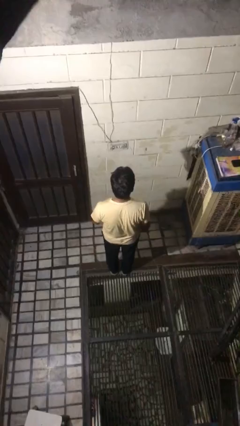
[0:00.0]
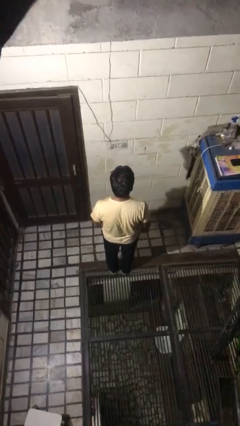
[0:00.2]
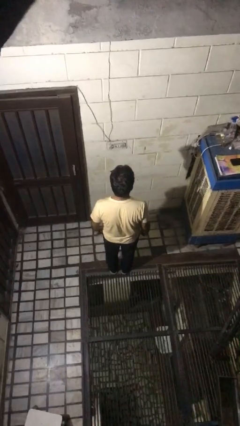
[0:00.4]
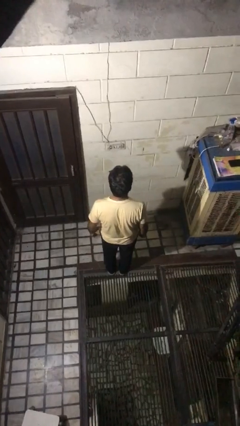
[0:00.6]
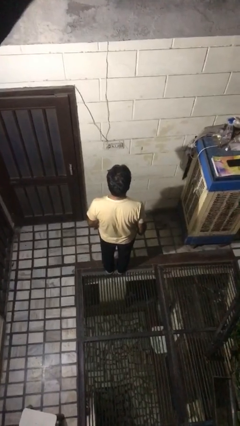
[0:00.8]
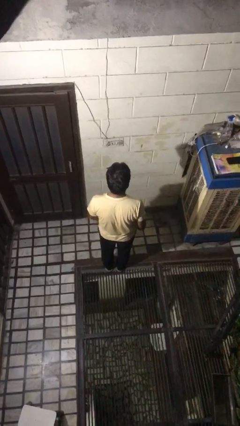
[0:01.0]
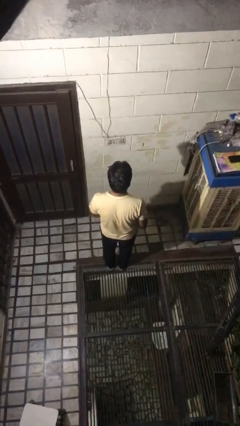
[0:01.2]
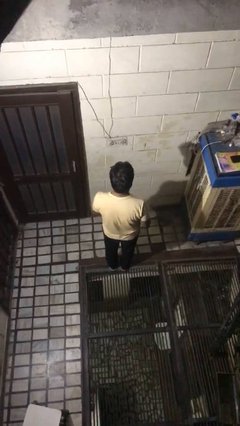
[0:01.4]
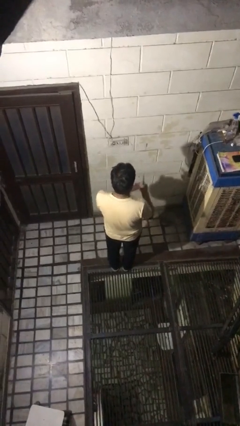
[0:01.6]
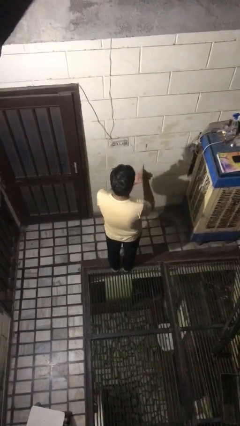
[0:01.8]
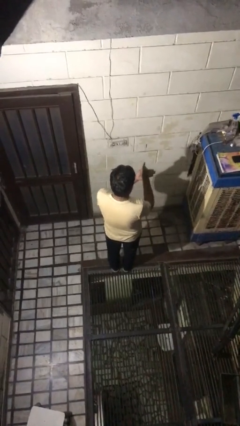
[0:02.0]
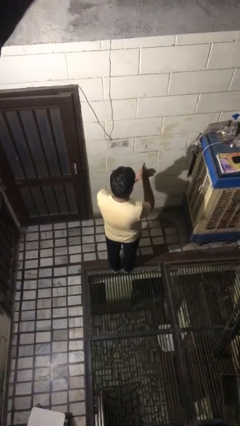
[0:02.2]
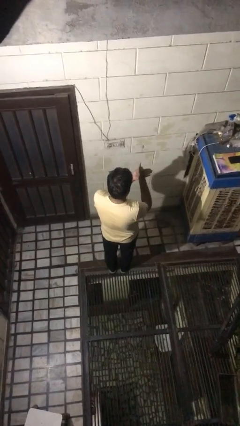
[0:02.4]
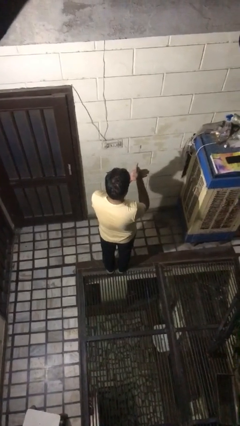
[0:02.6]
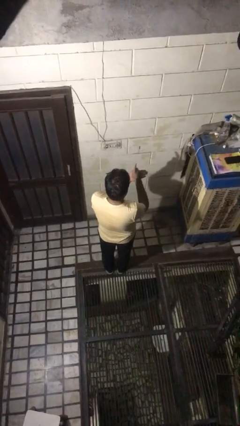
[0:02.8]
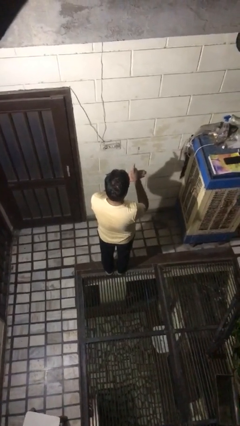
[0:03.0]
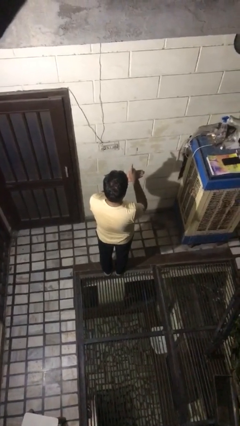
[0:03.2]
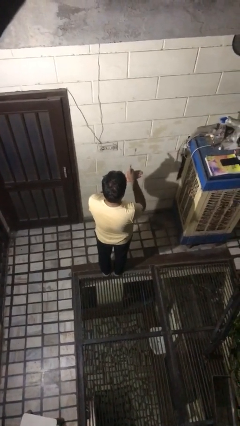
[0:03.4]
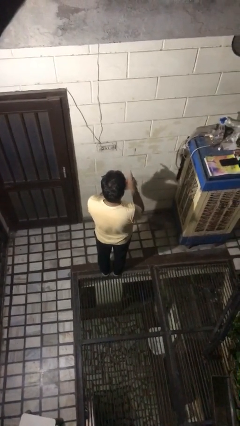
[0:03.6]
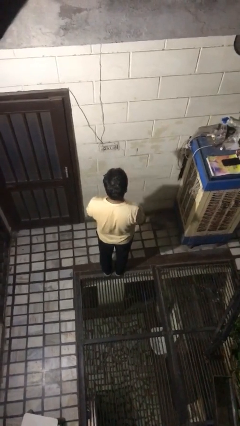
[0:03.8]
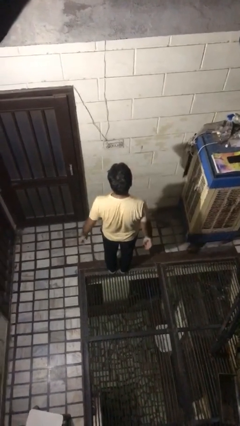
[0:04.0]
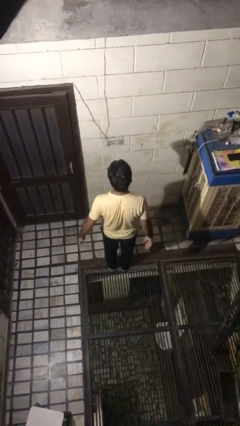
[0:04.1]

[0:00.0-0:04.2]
person gestures number one

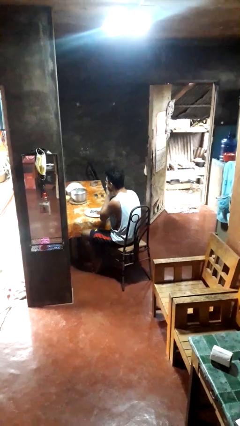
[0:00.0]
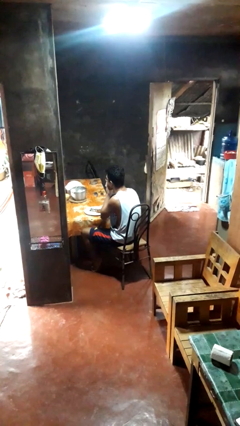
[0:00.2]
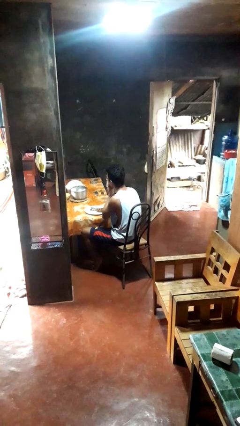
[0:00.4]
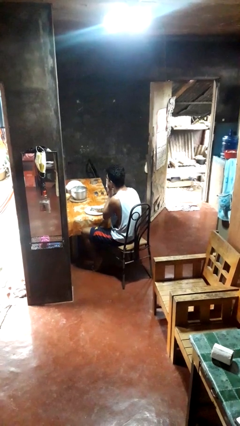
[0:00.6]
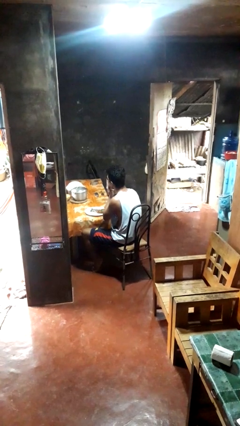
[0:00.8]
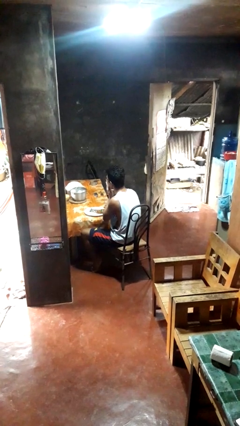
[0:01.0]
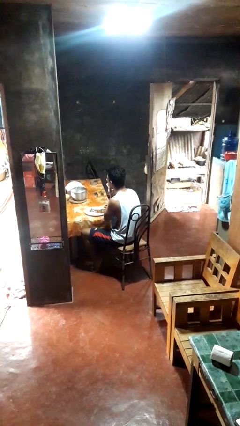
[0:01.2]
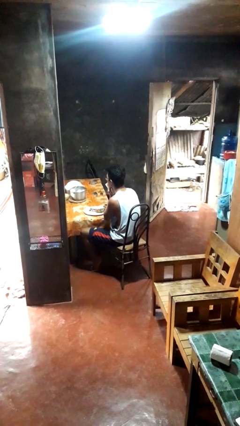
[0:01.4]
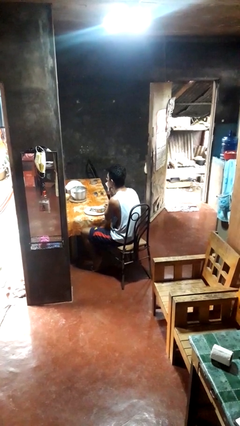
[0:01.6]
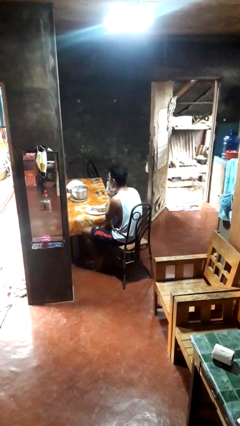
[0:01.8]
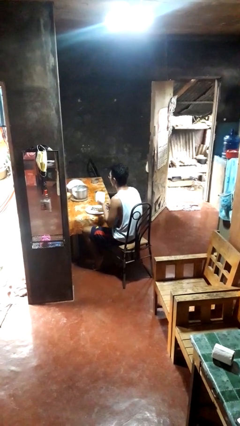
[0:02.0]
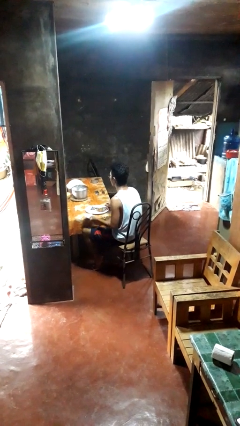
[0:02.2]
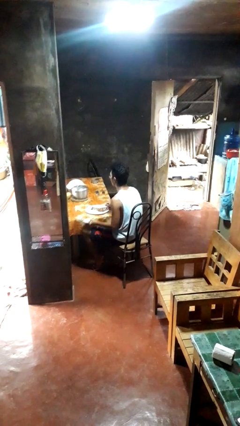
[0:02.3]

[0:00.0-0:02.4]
person wipes mouth with napkin

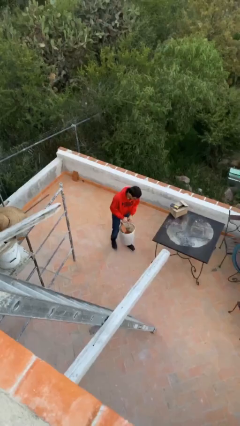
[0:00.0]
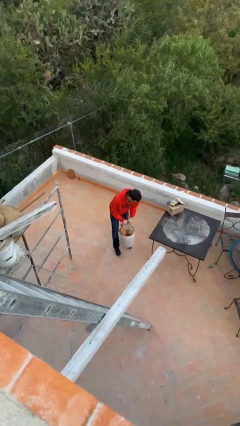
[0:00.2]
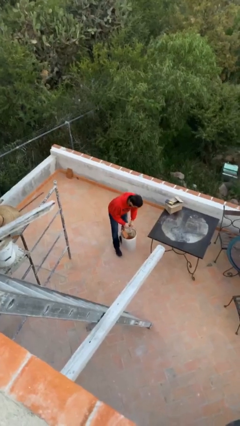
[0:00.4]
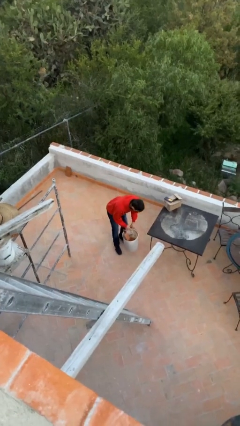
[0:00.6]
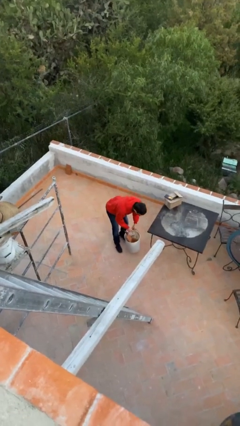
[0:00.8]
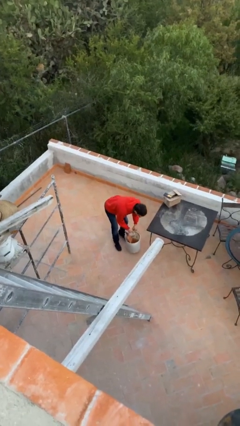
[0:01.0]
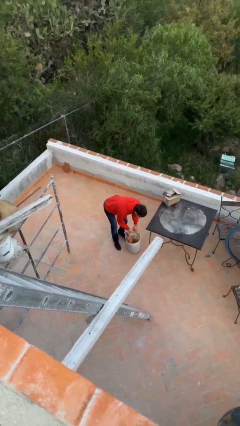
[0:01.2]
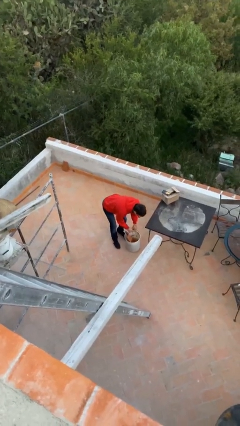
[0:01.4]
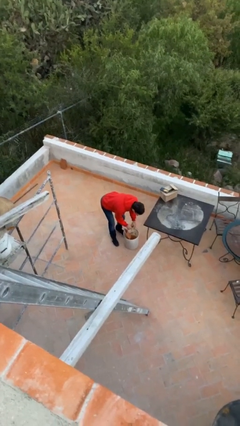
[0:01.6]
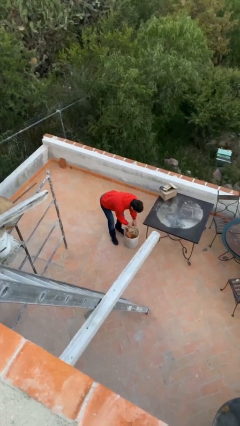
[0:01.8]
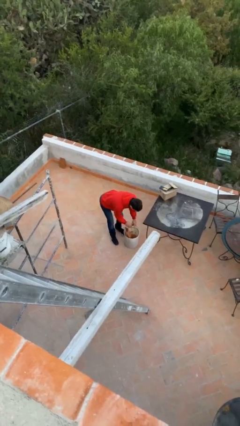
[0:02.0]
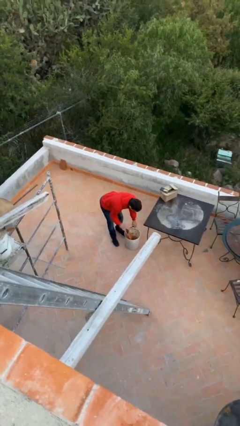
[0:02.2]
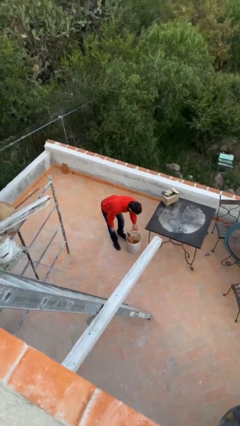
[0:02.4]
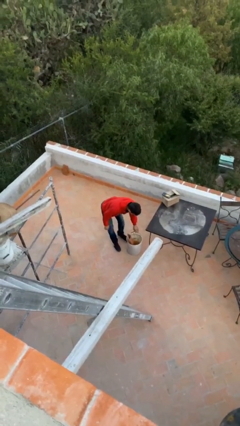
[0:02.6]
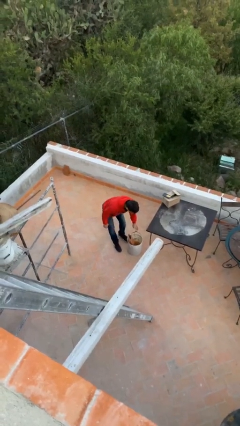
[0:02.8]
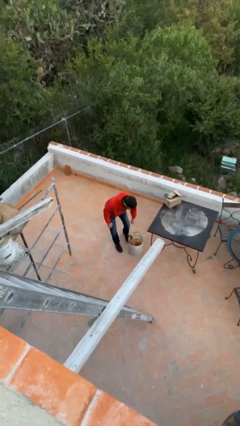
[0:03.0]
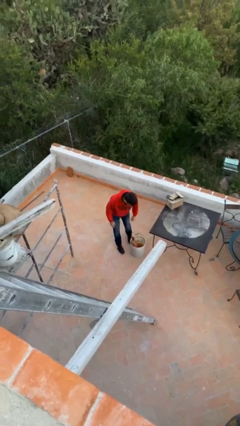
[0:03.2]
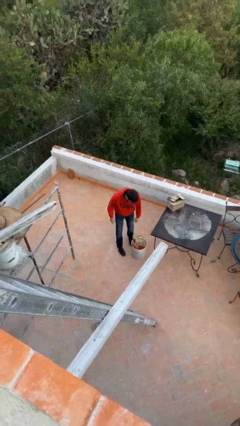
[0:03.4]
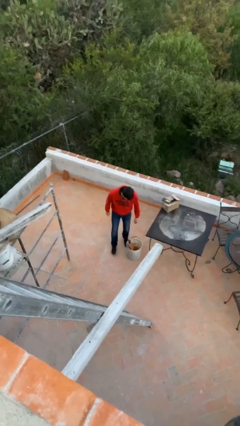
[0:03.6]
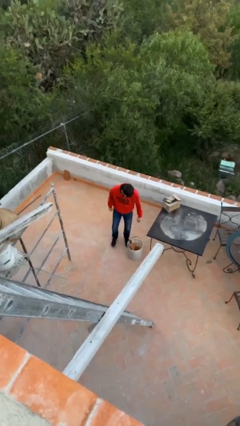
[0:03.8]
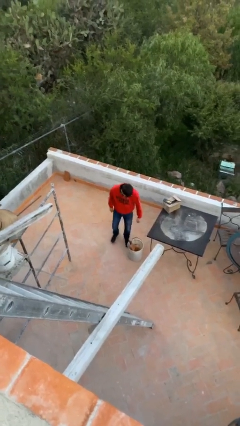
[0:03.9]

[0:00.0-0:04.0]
person puts down object on floor

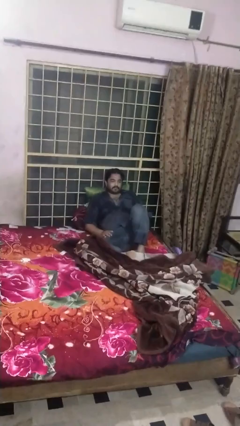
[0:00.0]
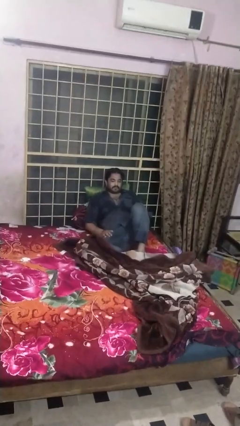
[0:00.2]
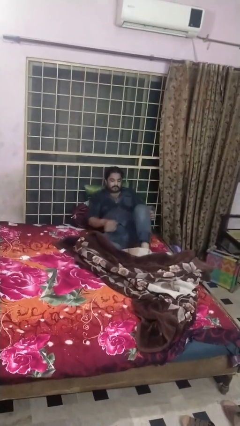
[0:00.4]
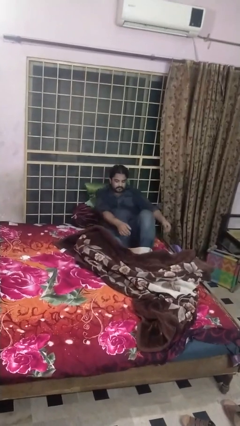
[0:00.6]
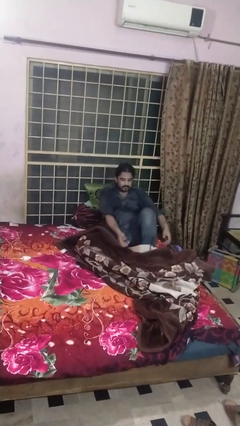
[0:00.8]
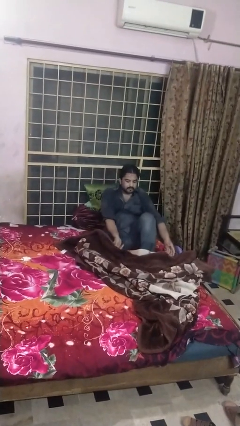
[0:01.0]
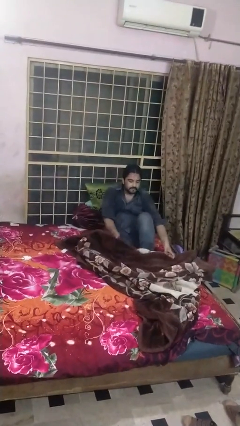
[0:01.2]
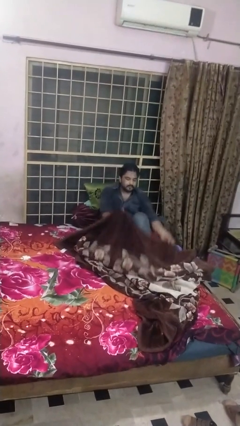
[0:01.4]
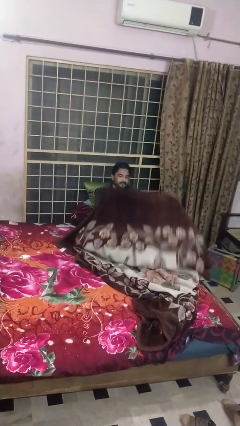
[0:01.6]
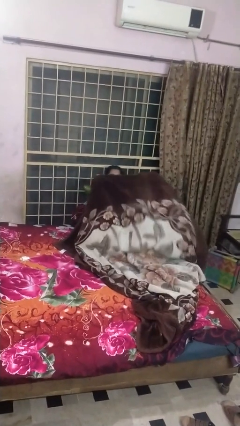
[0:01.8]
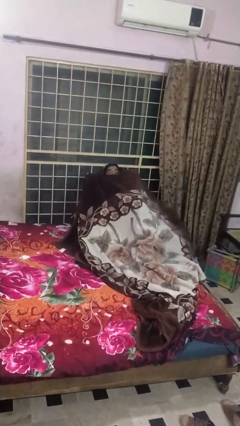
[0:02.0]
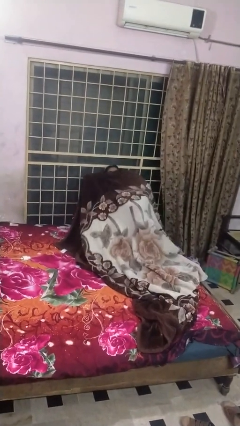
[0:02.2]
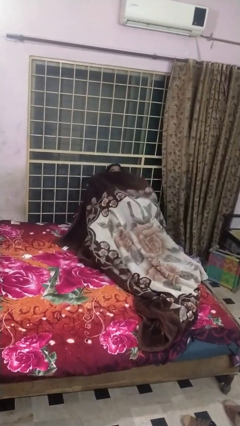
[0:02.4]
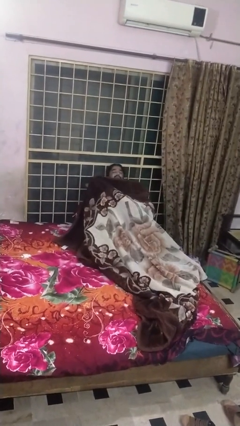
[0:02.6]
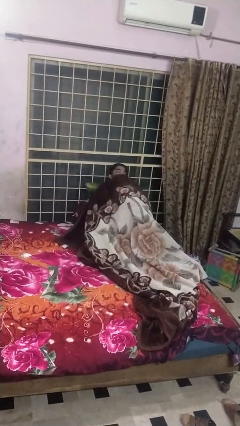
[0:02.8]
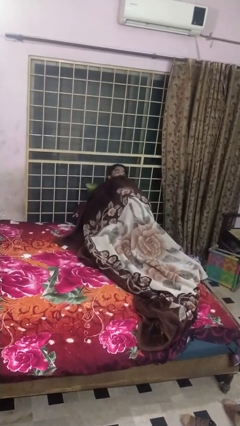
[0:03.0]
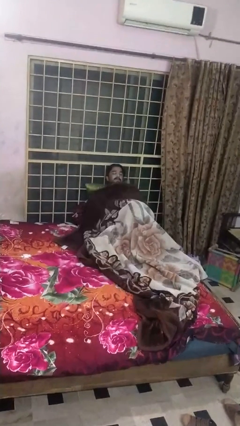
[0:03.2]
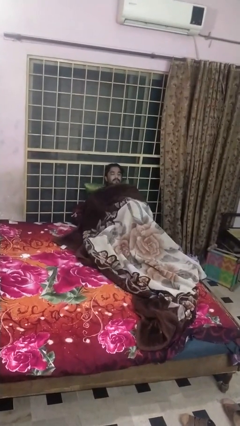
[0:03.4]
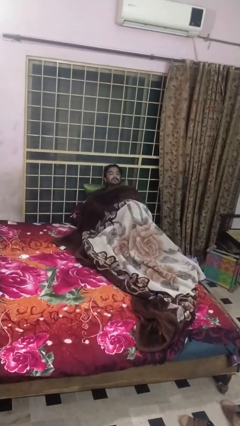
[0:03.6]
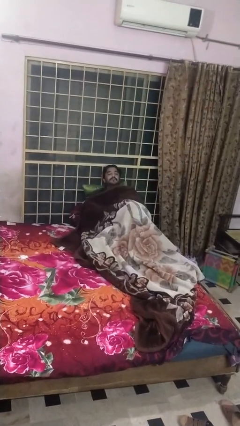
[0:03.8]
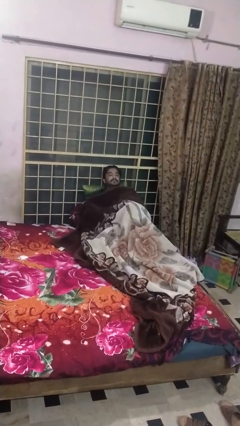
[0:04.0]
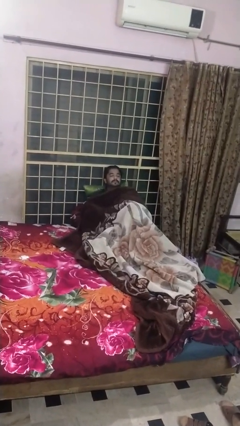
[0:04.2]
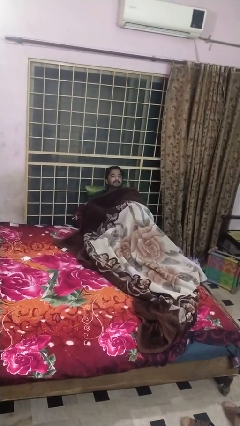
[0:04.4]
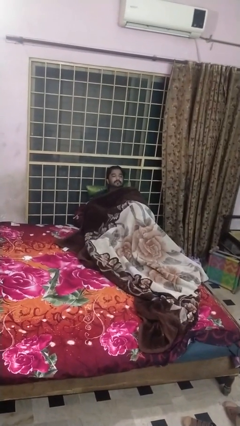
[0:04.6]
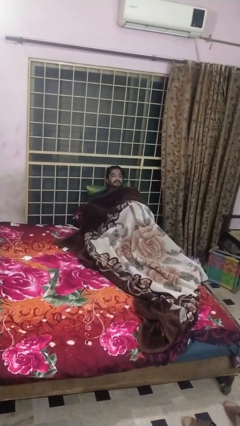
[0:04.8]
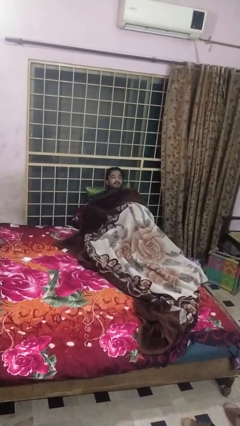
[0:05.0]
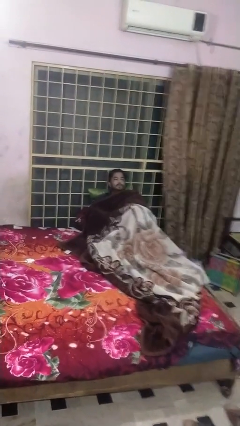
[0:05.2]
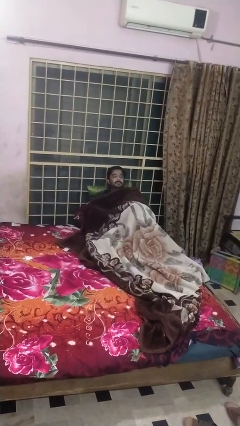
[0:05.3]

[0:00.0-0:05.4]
person covers with blanket

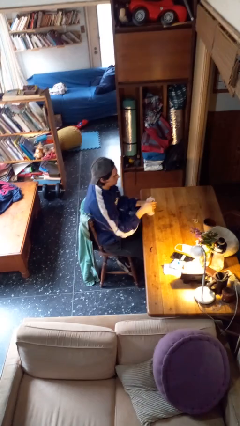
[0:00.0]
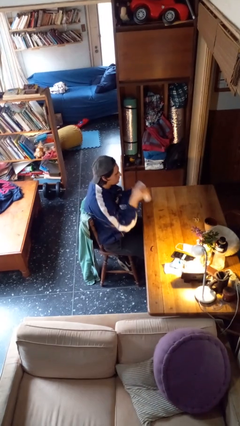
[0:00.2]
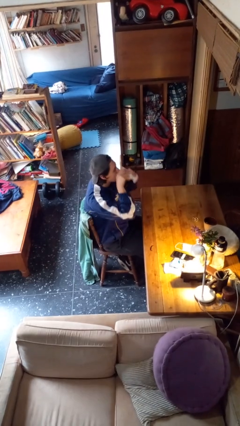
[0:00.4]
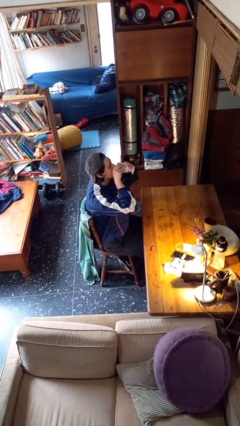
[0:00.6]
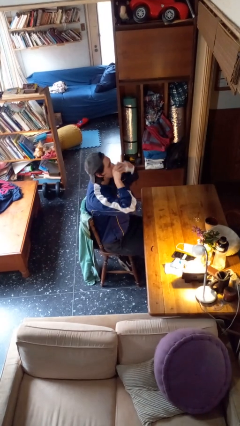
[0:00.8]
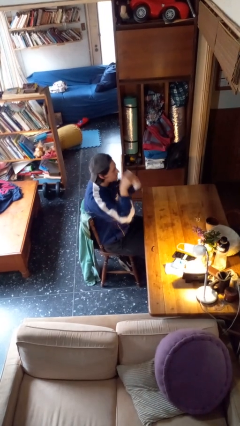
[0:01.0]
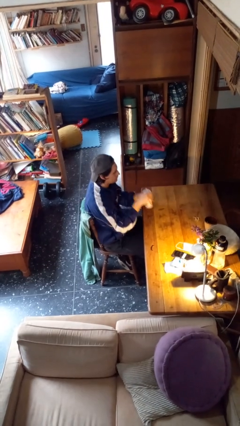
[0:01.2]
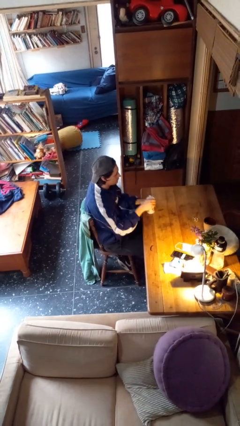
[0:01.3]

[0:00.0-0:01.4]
person drinks from mug

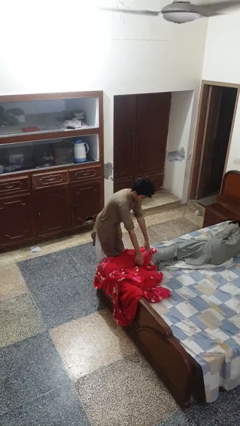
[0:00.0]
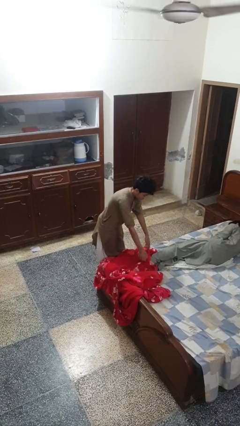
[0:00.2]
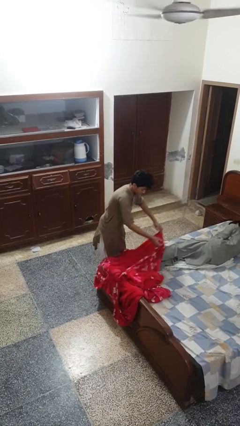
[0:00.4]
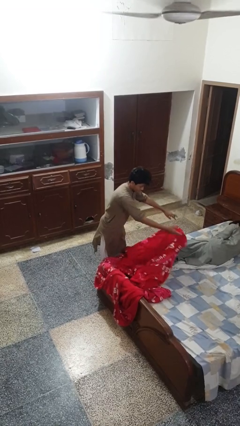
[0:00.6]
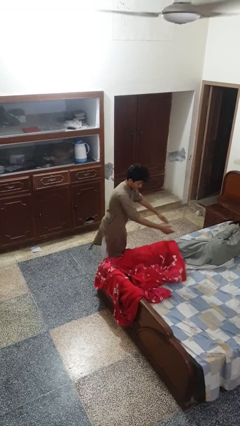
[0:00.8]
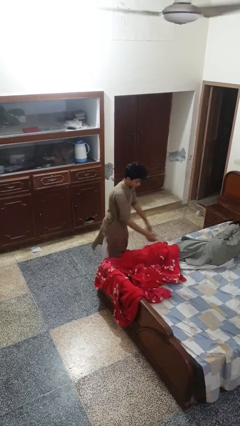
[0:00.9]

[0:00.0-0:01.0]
person covers friend with blanket
